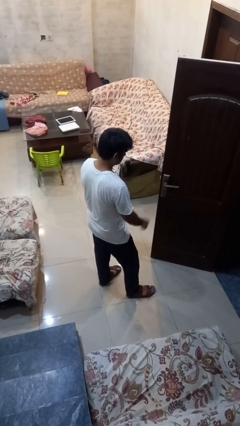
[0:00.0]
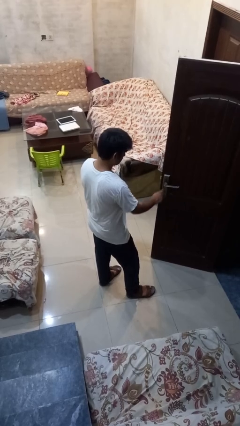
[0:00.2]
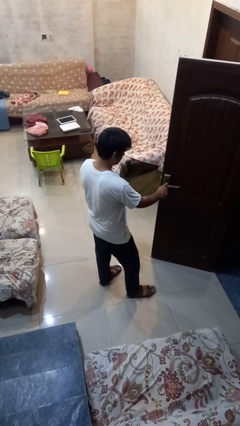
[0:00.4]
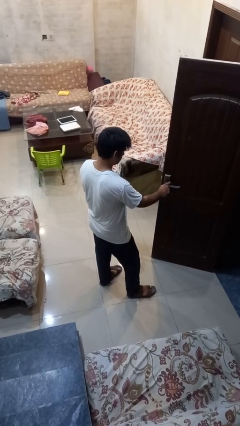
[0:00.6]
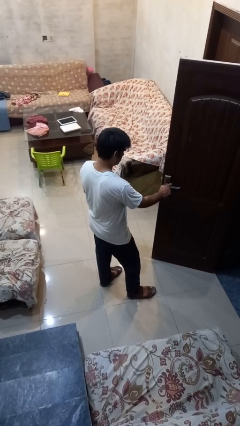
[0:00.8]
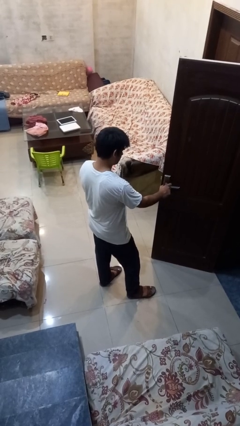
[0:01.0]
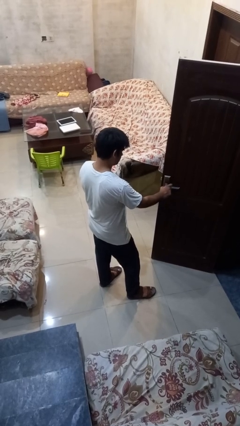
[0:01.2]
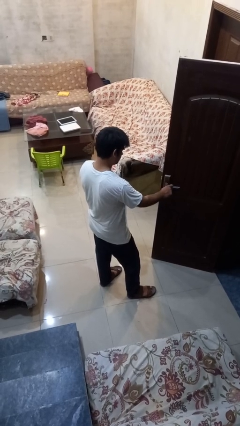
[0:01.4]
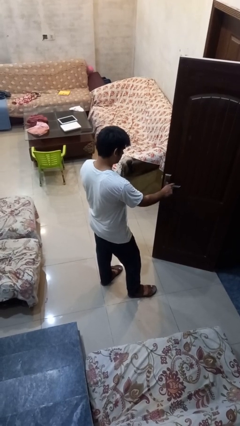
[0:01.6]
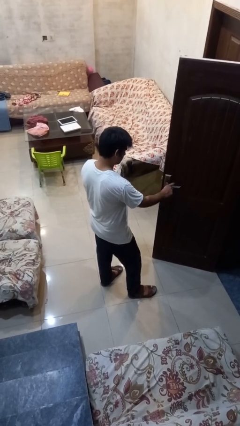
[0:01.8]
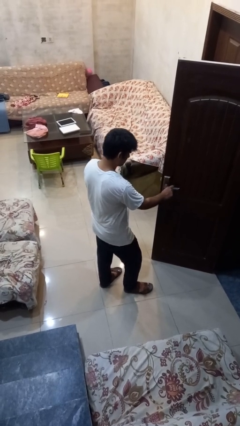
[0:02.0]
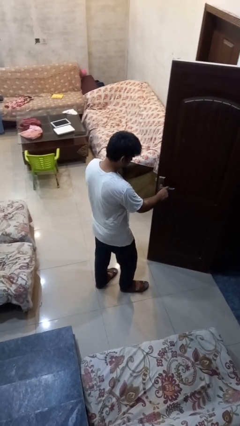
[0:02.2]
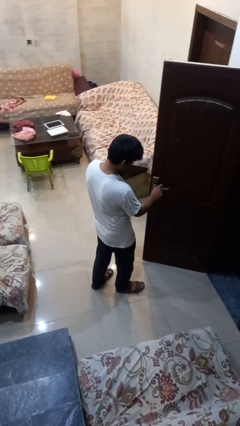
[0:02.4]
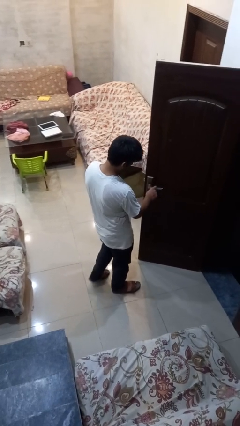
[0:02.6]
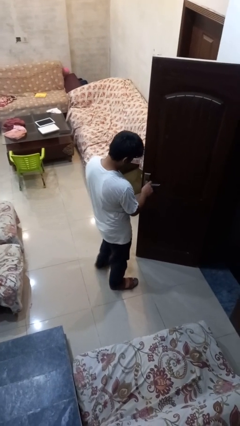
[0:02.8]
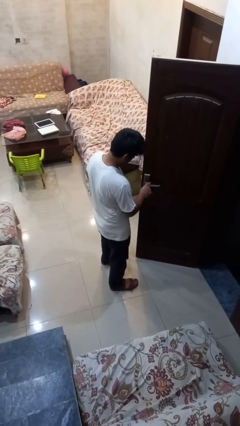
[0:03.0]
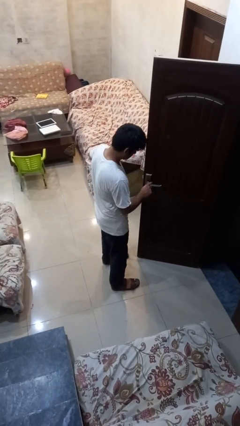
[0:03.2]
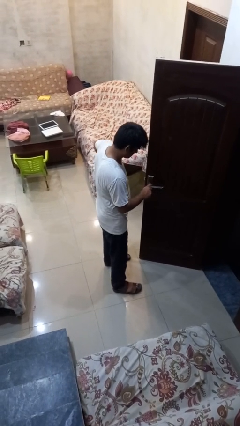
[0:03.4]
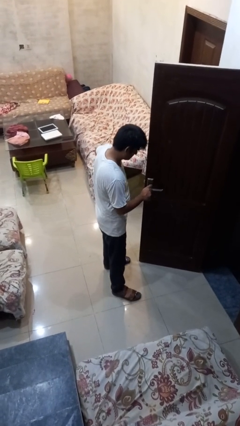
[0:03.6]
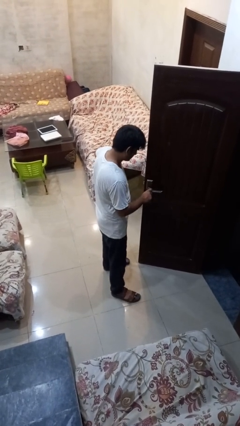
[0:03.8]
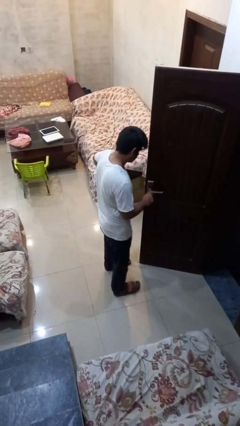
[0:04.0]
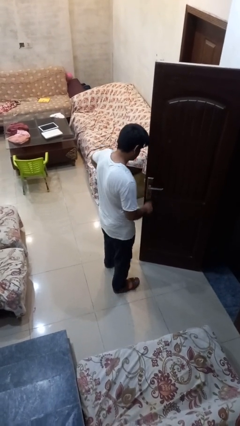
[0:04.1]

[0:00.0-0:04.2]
person taps object with finger

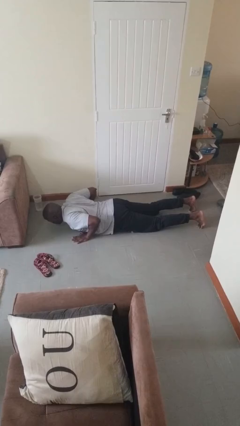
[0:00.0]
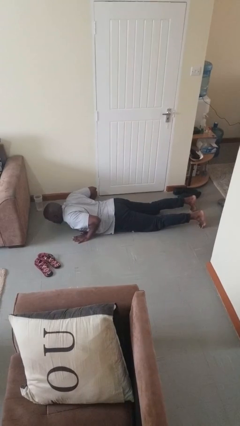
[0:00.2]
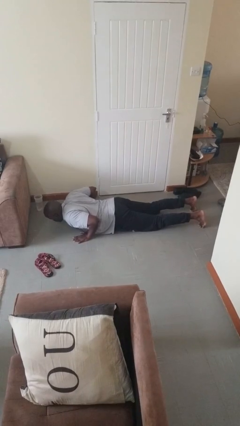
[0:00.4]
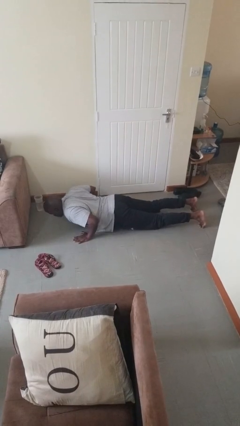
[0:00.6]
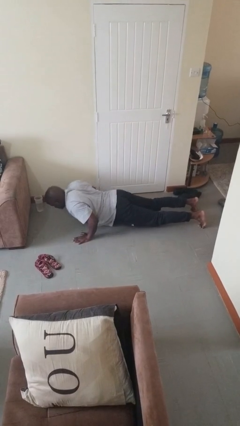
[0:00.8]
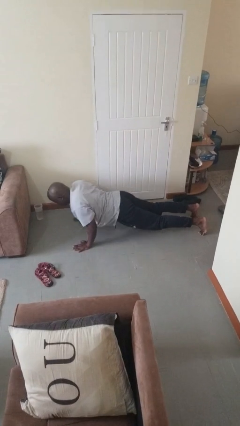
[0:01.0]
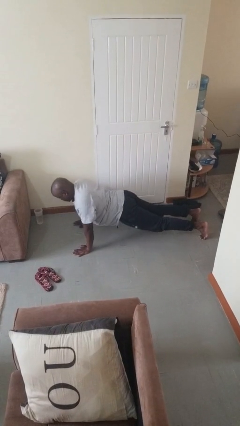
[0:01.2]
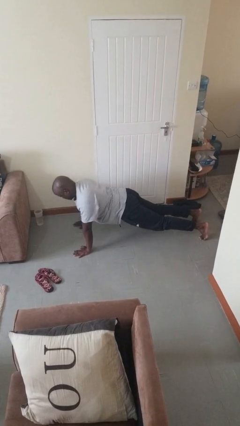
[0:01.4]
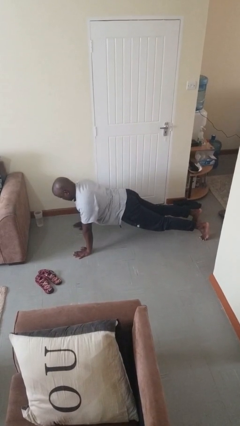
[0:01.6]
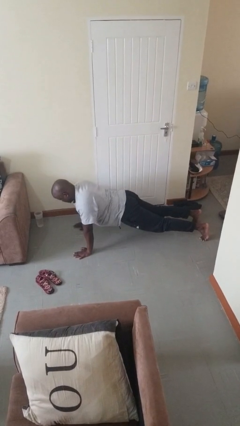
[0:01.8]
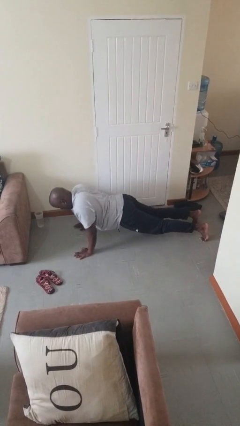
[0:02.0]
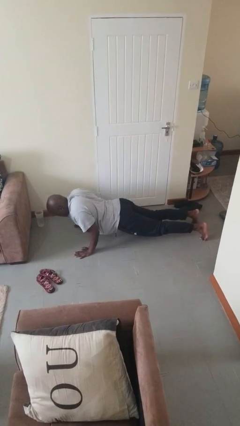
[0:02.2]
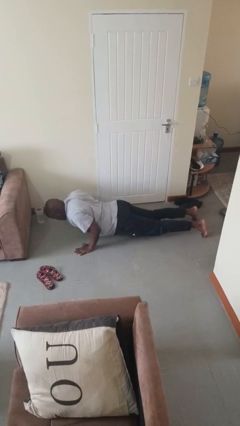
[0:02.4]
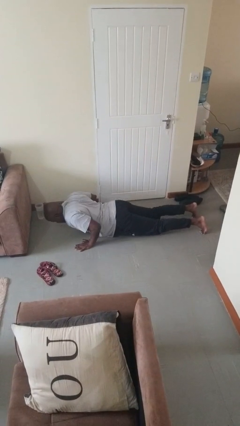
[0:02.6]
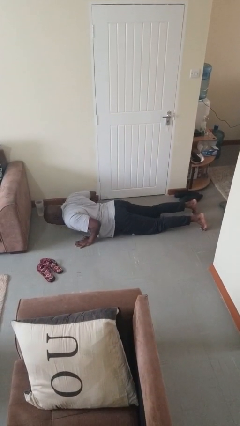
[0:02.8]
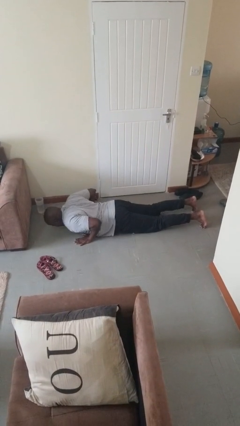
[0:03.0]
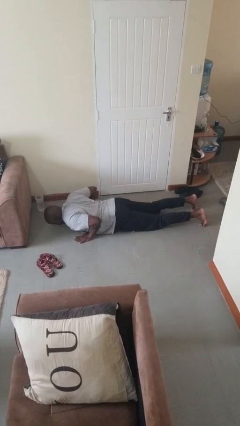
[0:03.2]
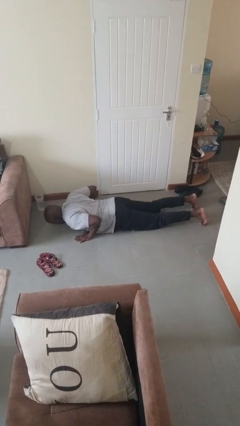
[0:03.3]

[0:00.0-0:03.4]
person exercises with pushup

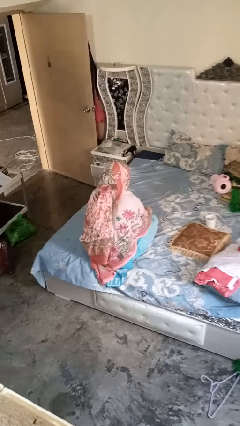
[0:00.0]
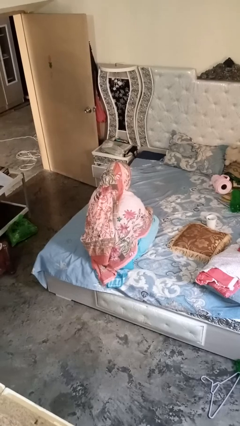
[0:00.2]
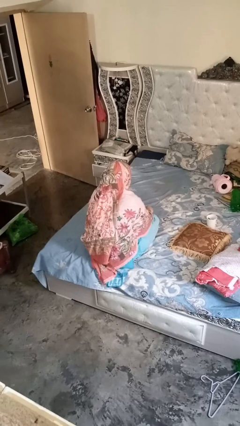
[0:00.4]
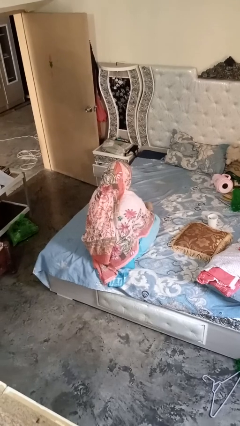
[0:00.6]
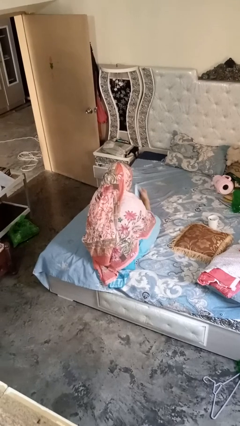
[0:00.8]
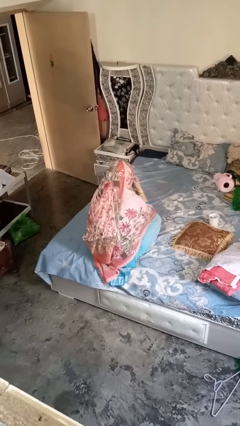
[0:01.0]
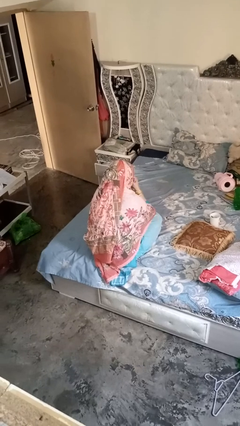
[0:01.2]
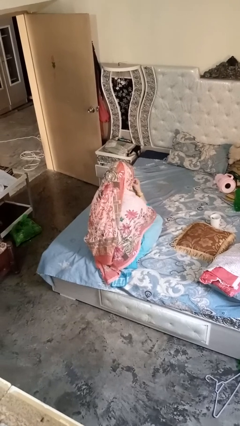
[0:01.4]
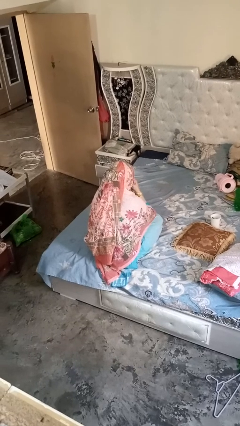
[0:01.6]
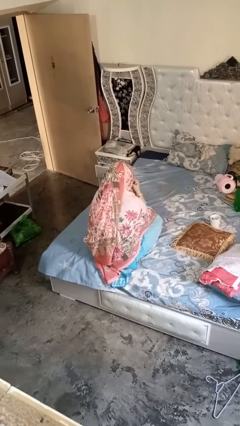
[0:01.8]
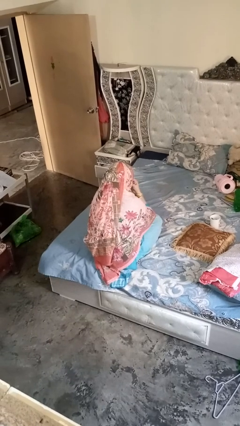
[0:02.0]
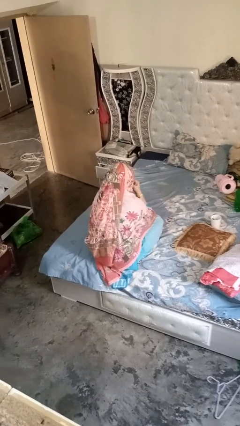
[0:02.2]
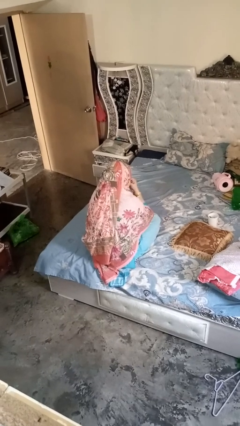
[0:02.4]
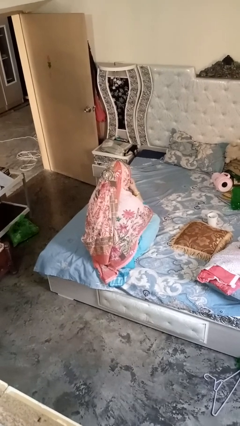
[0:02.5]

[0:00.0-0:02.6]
person blows nose

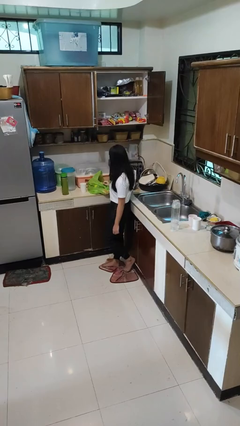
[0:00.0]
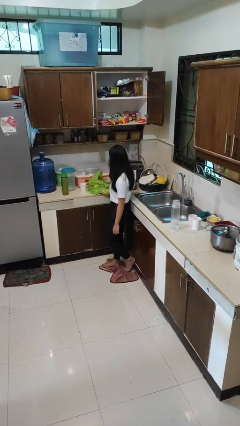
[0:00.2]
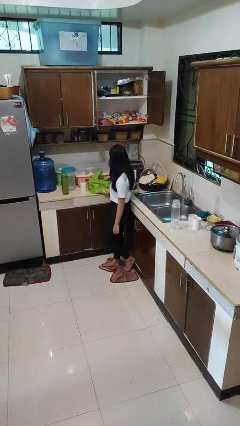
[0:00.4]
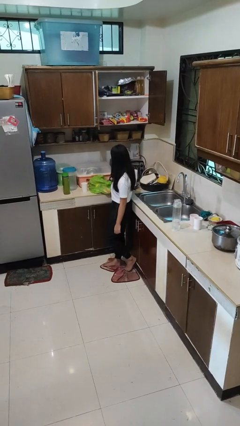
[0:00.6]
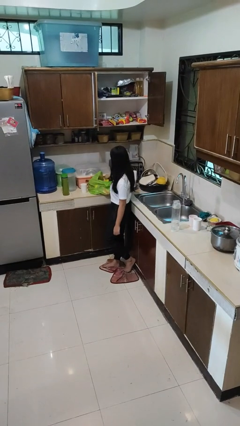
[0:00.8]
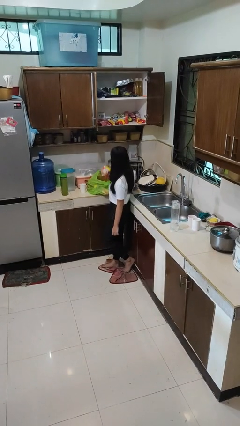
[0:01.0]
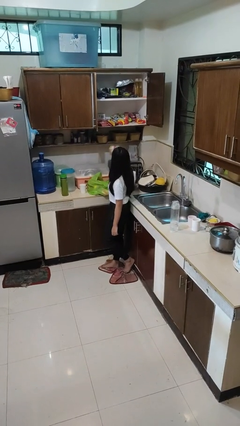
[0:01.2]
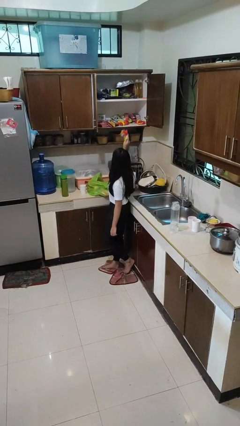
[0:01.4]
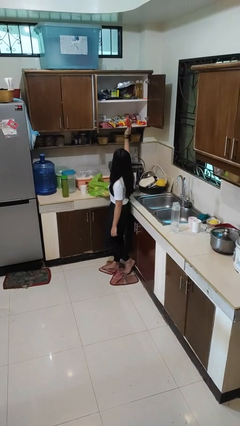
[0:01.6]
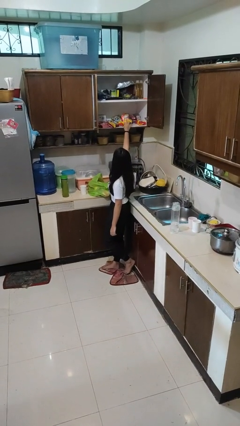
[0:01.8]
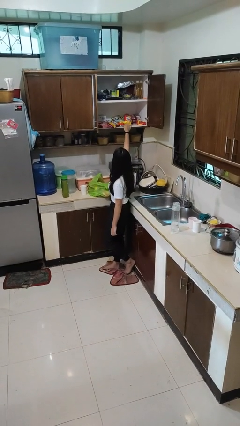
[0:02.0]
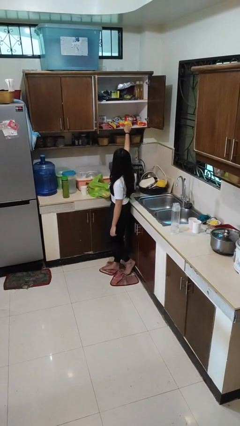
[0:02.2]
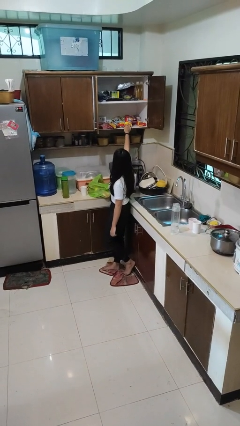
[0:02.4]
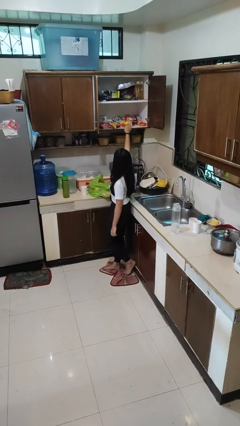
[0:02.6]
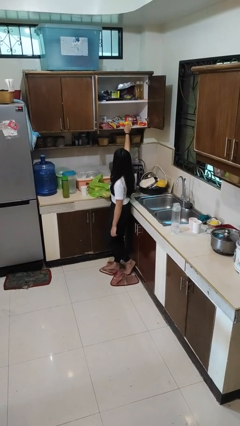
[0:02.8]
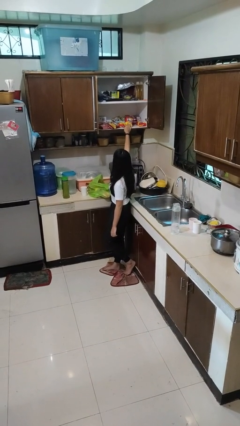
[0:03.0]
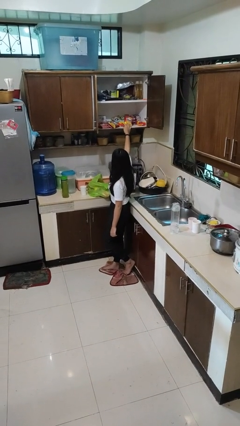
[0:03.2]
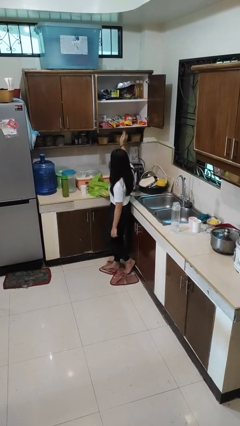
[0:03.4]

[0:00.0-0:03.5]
person loads groceries into cabinet

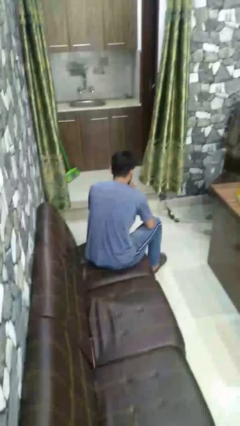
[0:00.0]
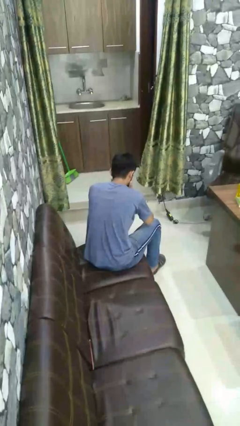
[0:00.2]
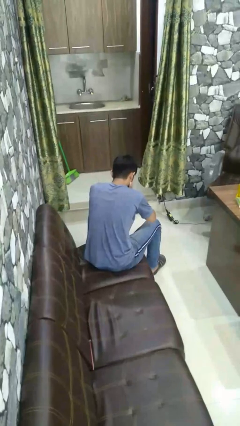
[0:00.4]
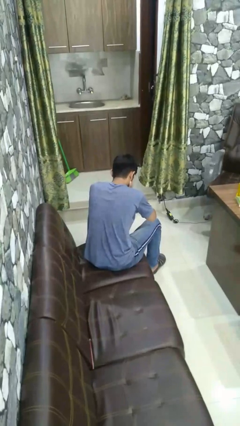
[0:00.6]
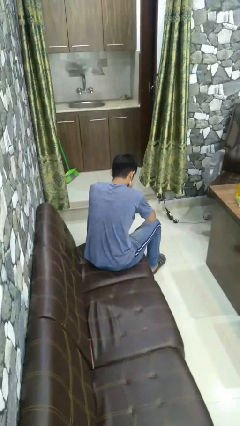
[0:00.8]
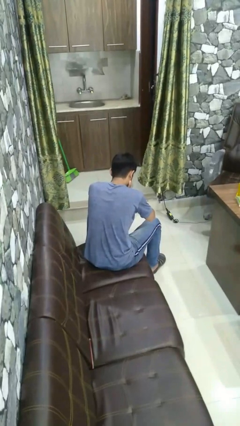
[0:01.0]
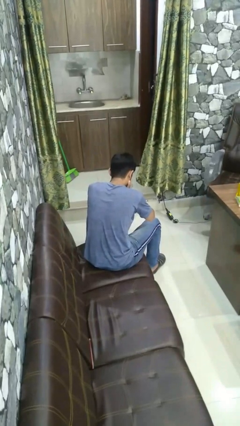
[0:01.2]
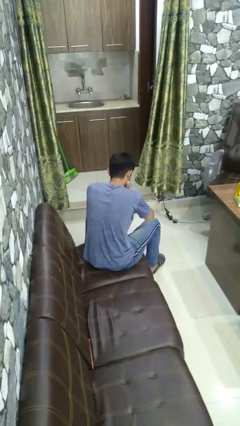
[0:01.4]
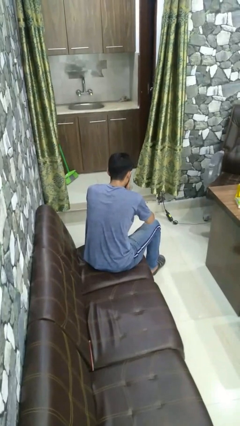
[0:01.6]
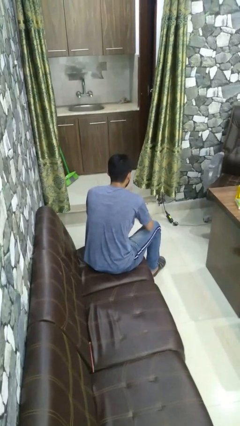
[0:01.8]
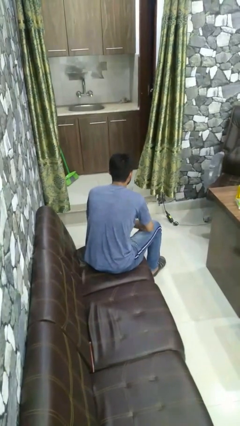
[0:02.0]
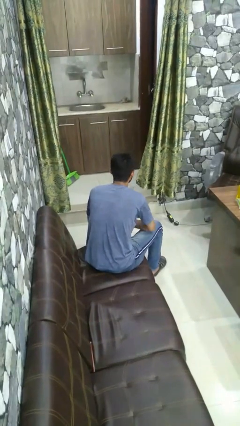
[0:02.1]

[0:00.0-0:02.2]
person covers face with hands

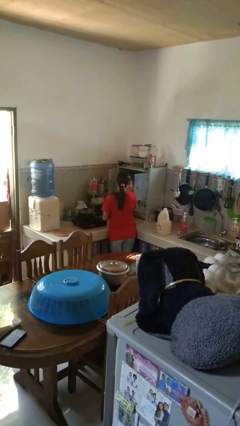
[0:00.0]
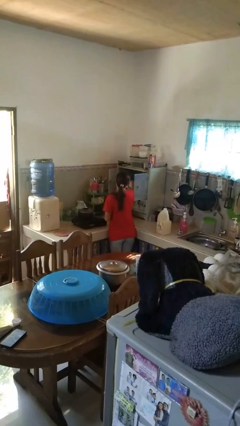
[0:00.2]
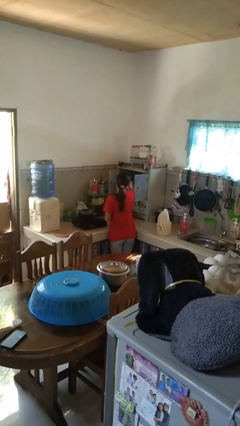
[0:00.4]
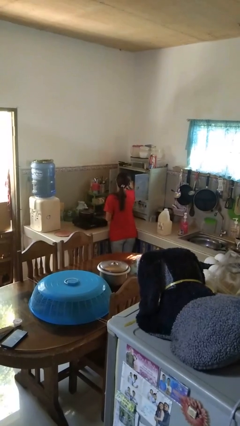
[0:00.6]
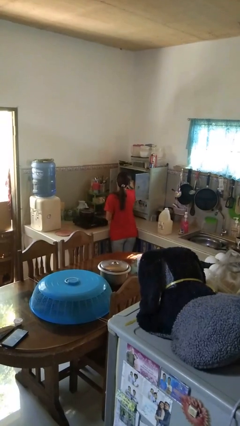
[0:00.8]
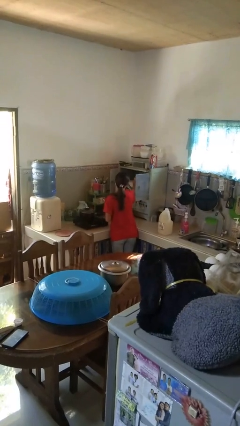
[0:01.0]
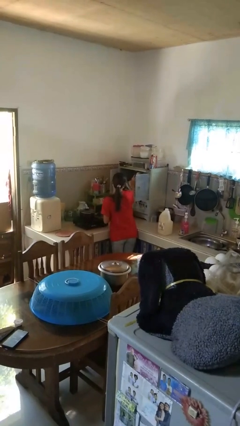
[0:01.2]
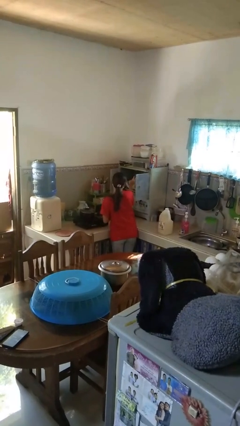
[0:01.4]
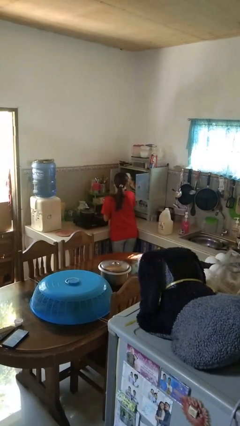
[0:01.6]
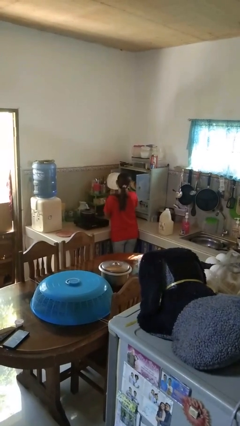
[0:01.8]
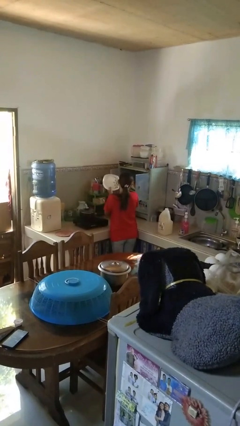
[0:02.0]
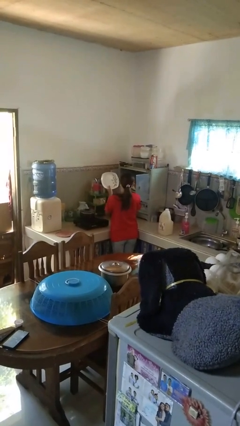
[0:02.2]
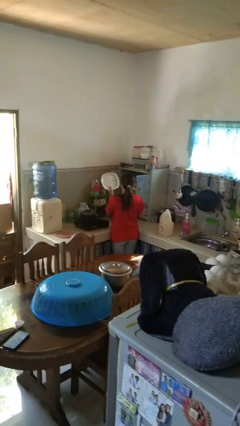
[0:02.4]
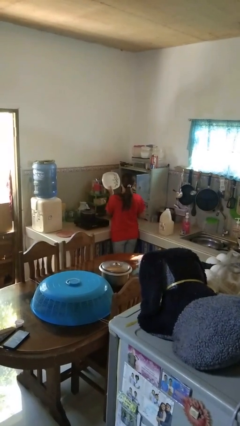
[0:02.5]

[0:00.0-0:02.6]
person takes object from cabinet
